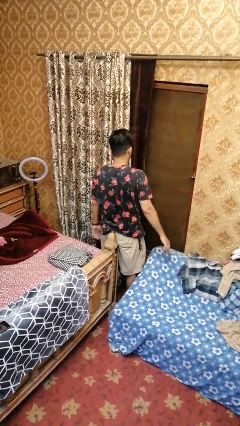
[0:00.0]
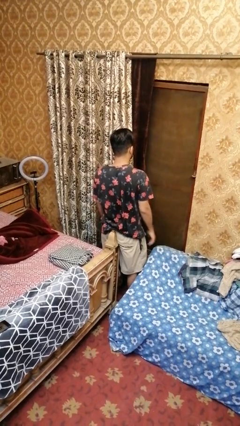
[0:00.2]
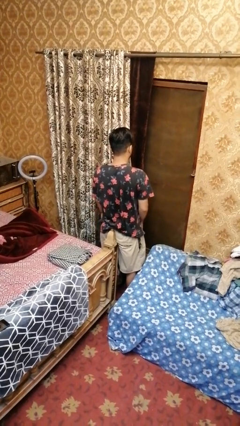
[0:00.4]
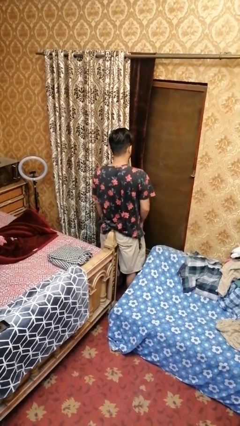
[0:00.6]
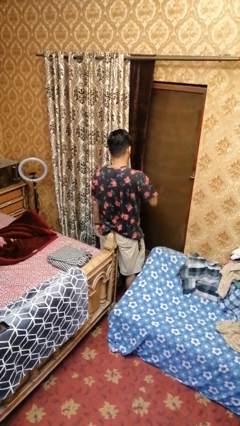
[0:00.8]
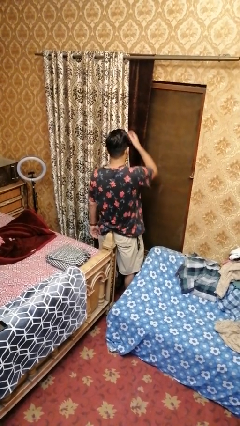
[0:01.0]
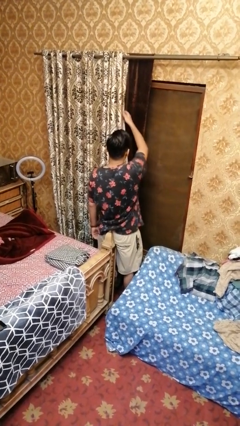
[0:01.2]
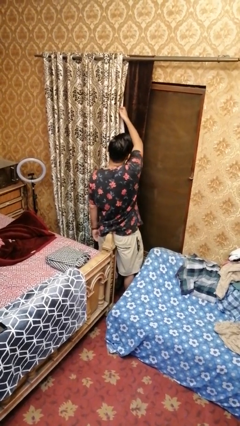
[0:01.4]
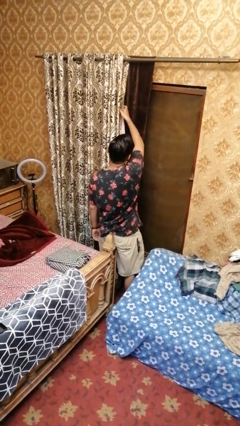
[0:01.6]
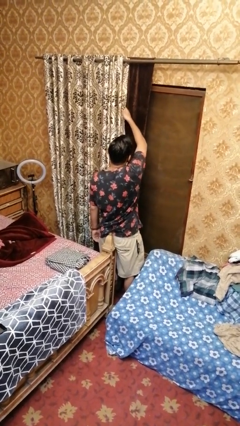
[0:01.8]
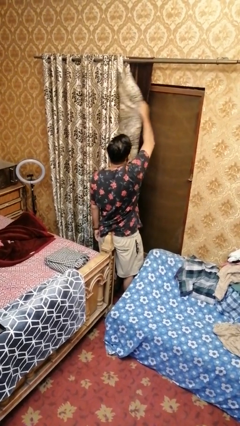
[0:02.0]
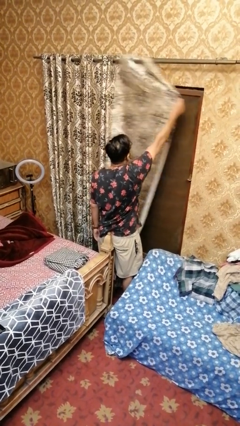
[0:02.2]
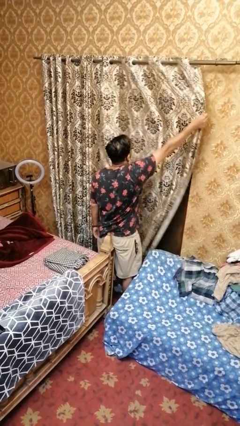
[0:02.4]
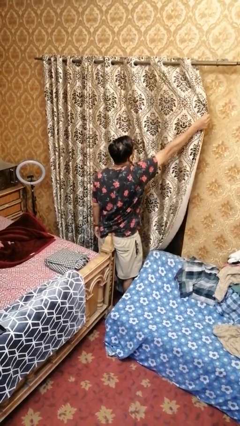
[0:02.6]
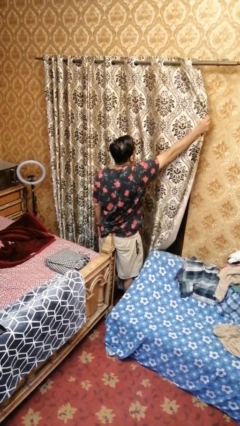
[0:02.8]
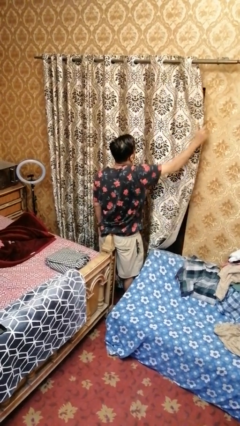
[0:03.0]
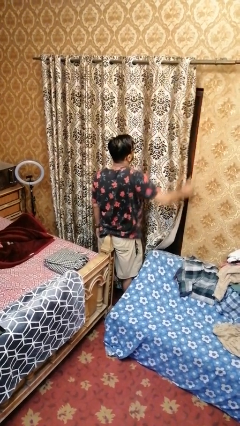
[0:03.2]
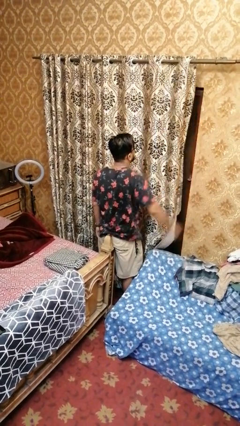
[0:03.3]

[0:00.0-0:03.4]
person closes curtains

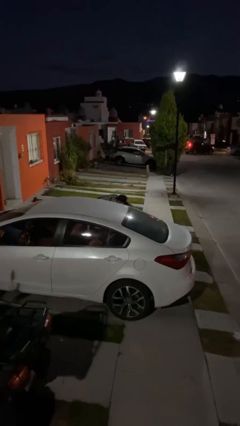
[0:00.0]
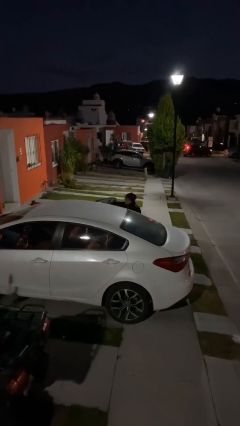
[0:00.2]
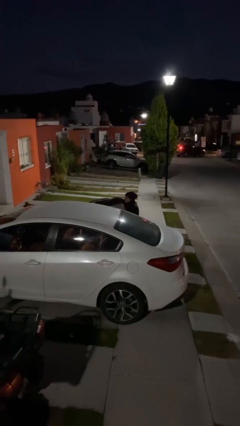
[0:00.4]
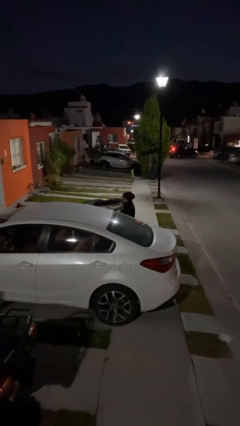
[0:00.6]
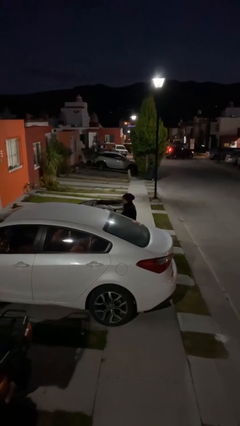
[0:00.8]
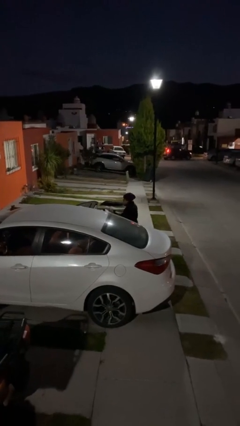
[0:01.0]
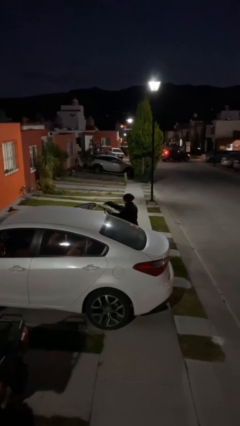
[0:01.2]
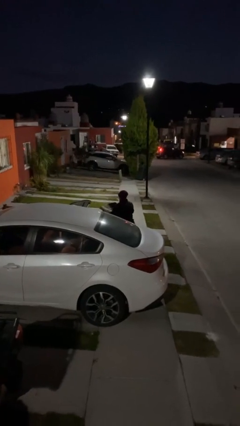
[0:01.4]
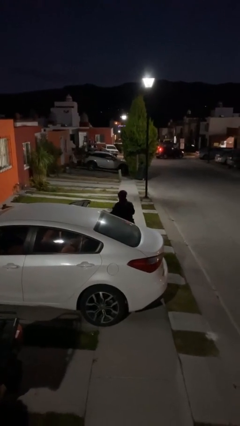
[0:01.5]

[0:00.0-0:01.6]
person unloads car

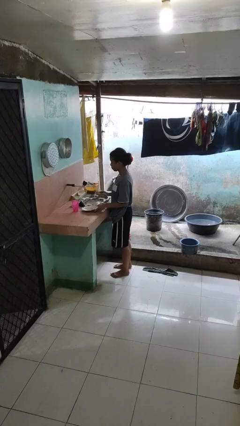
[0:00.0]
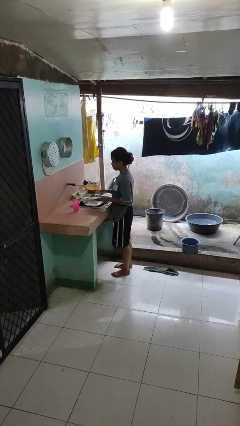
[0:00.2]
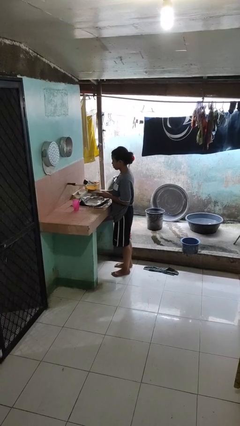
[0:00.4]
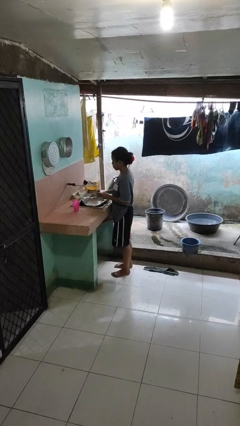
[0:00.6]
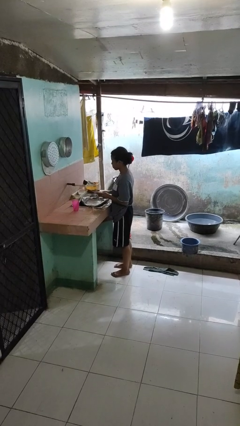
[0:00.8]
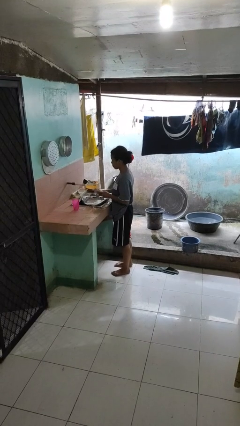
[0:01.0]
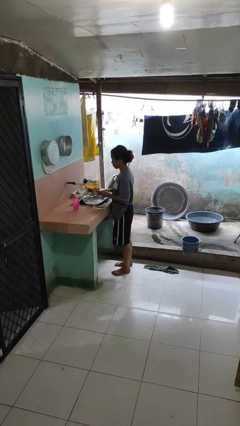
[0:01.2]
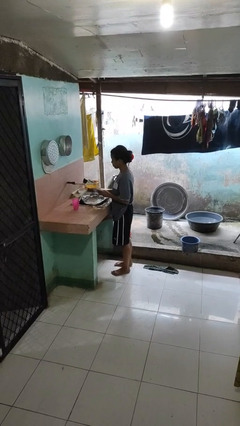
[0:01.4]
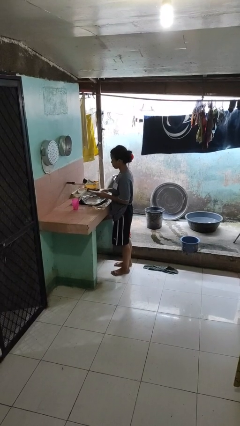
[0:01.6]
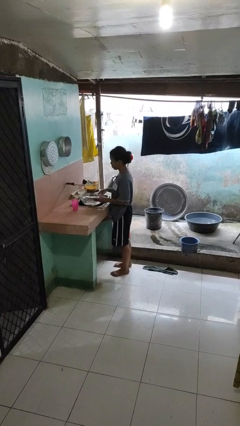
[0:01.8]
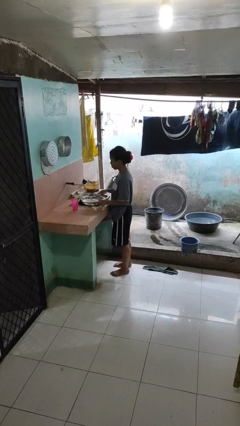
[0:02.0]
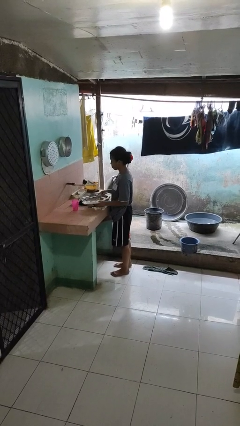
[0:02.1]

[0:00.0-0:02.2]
person washes dish

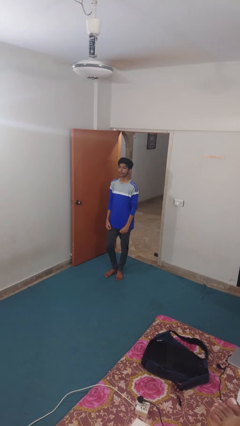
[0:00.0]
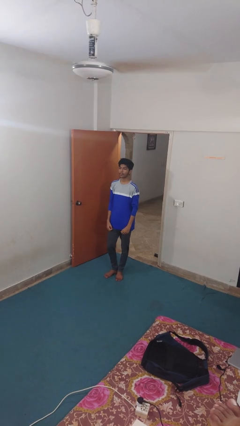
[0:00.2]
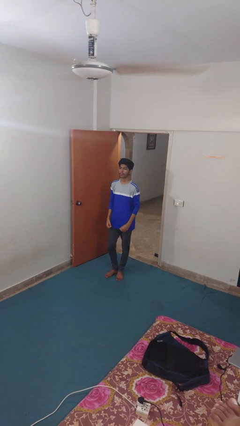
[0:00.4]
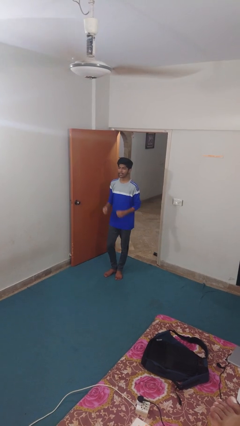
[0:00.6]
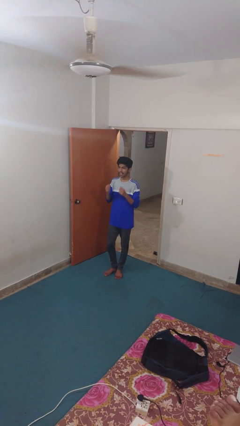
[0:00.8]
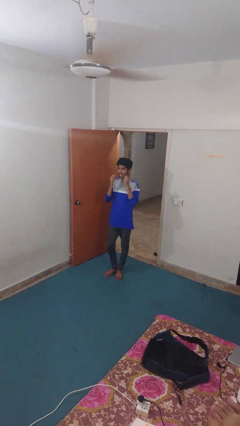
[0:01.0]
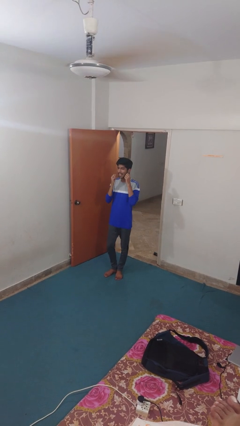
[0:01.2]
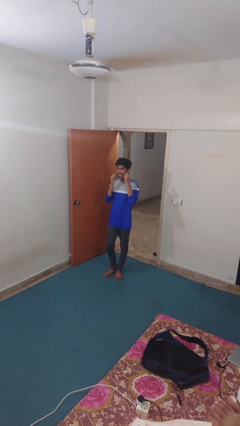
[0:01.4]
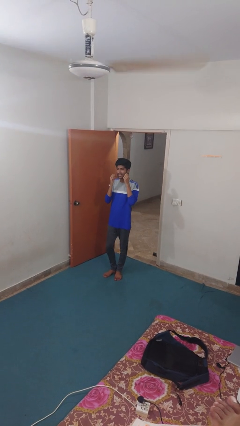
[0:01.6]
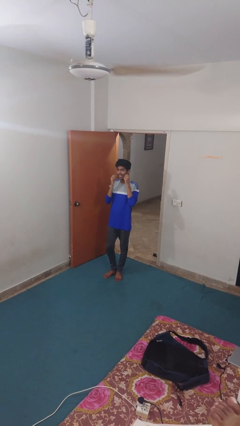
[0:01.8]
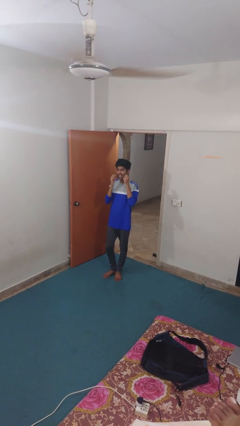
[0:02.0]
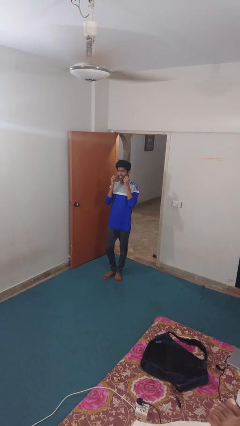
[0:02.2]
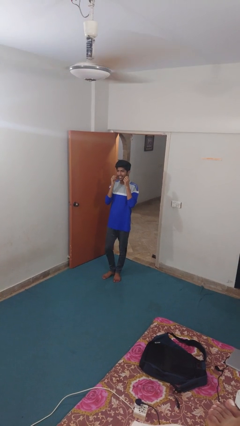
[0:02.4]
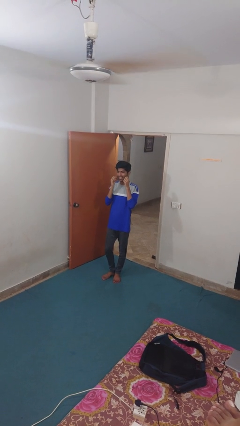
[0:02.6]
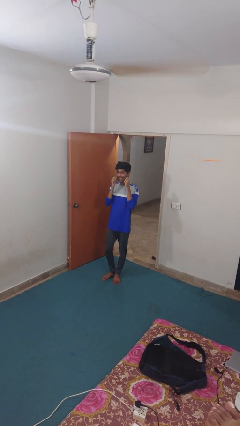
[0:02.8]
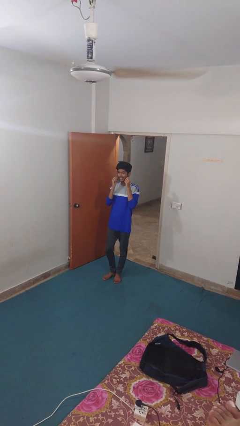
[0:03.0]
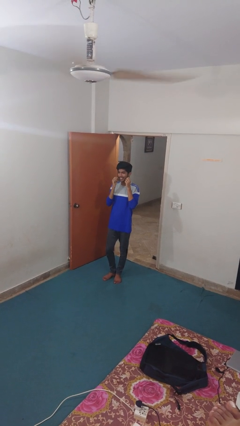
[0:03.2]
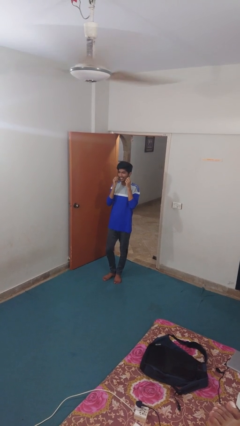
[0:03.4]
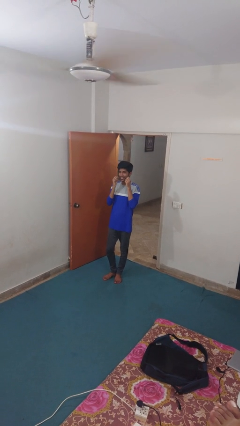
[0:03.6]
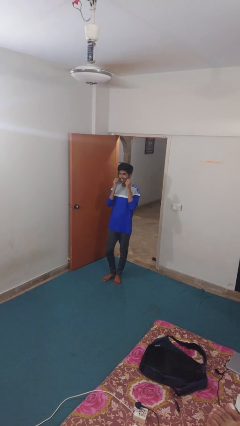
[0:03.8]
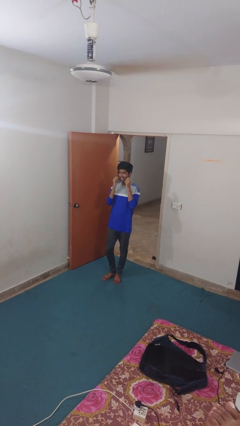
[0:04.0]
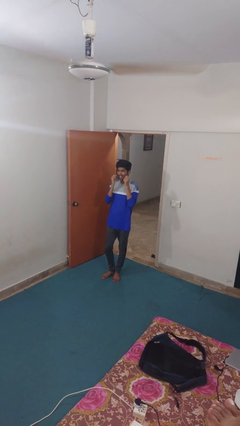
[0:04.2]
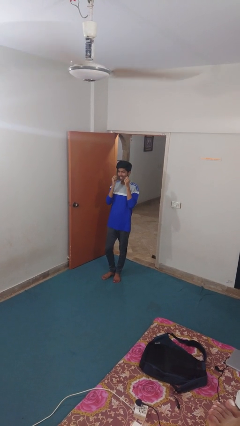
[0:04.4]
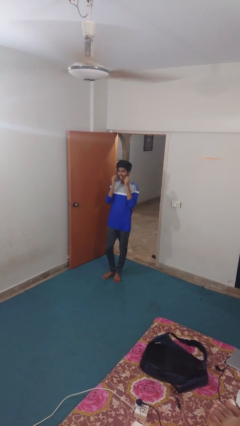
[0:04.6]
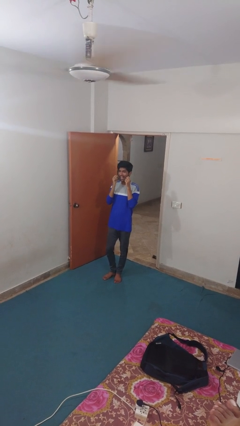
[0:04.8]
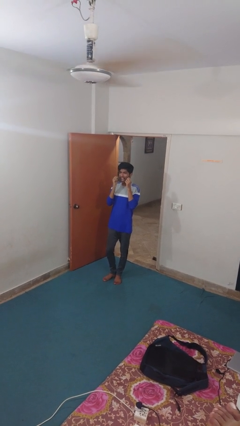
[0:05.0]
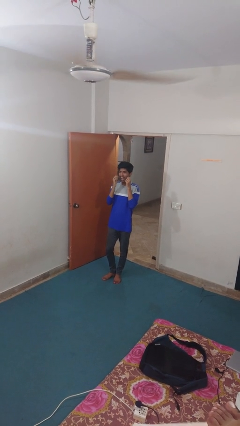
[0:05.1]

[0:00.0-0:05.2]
person flosses

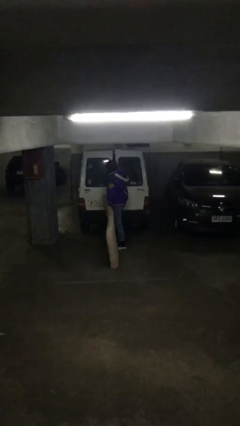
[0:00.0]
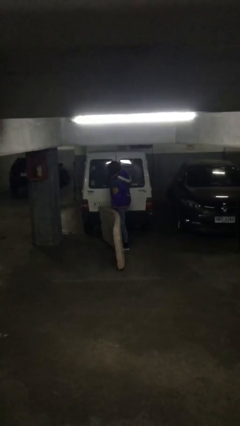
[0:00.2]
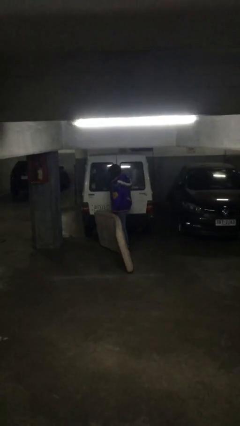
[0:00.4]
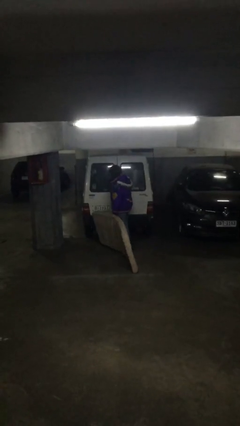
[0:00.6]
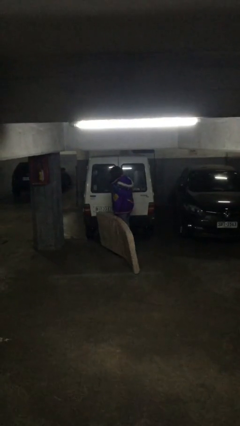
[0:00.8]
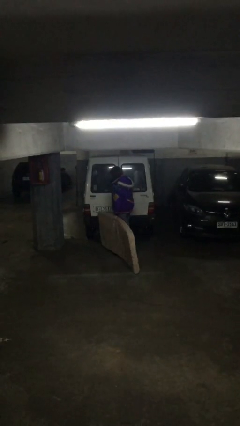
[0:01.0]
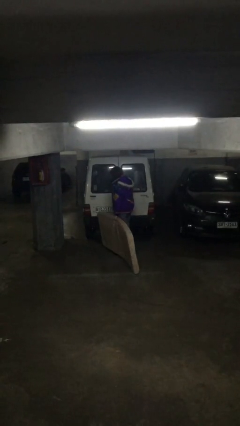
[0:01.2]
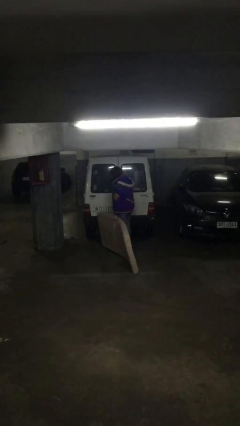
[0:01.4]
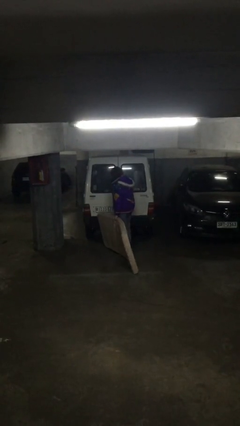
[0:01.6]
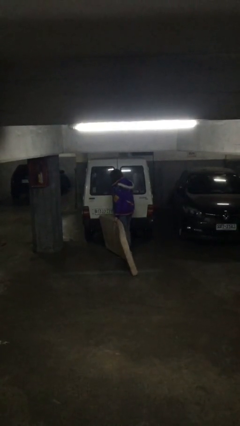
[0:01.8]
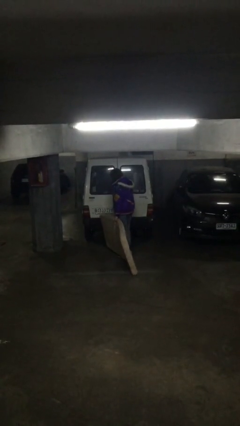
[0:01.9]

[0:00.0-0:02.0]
person closes car door

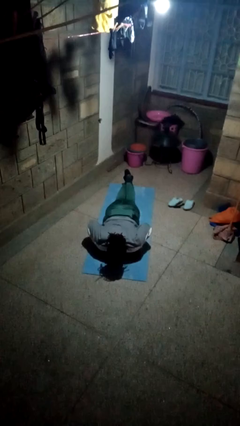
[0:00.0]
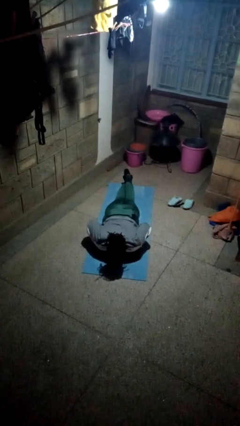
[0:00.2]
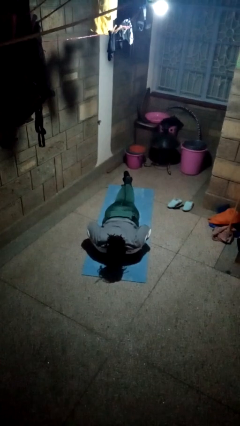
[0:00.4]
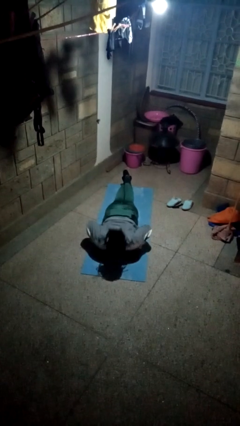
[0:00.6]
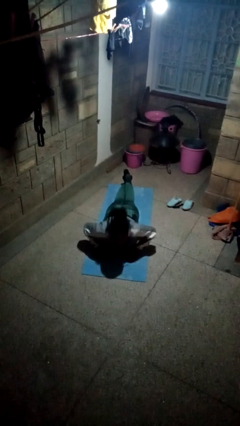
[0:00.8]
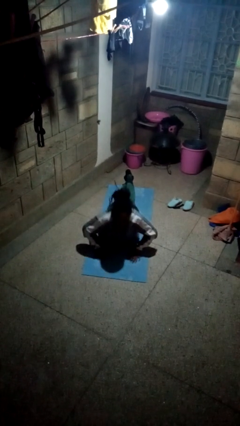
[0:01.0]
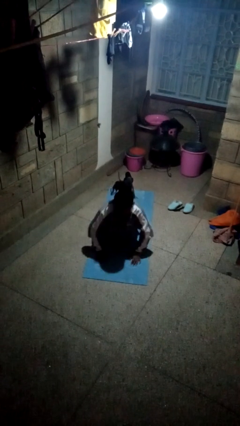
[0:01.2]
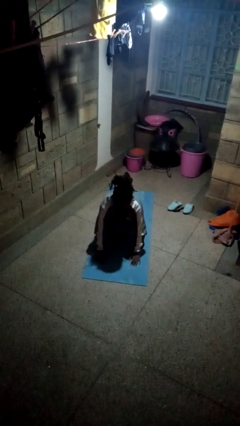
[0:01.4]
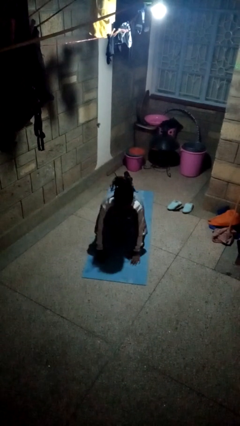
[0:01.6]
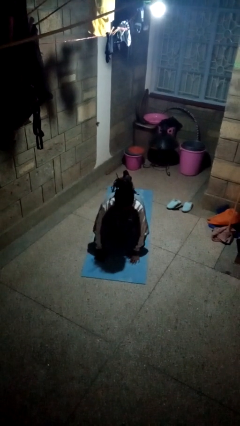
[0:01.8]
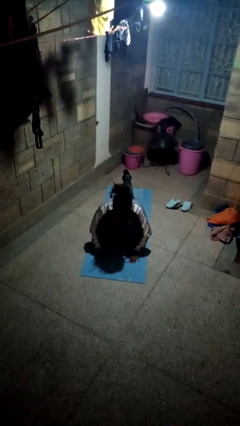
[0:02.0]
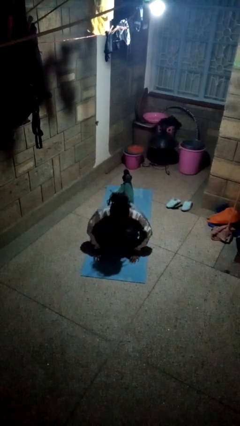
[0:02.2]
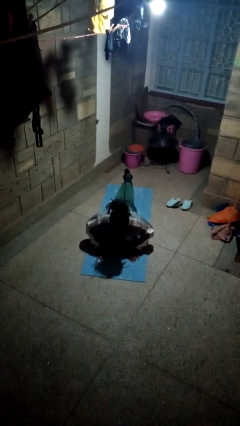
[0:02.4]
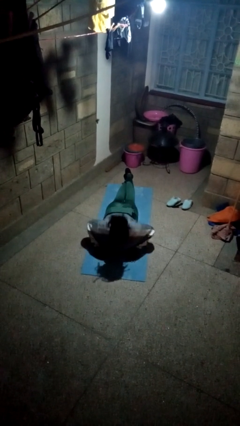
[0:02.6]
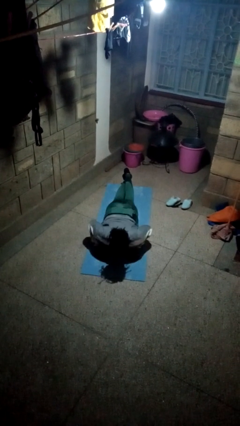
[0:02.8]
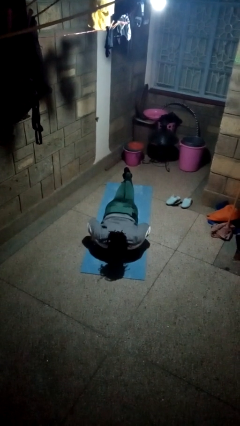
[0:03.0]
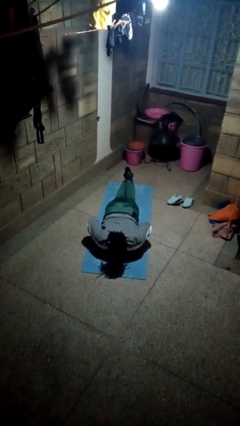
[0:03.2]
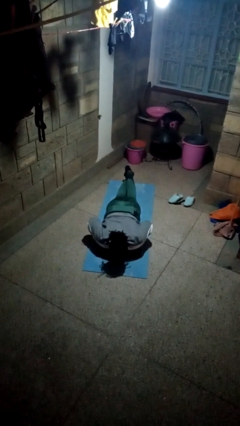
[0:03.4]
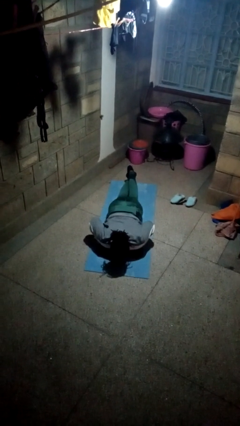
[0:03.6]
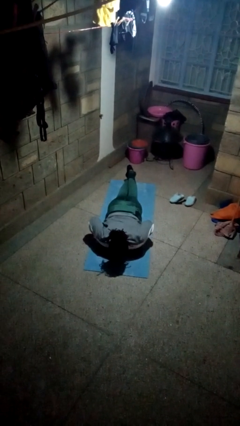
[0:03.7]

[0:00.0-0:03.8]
person exercises with pushup
